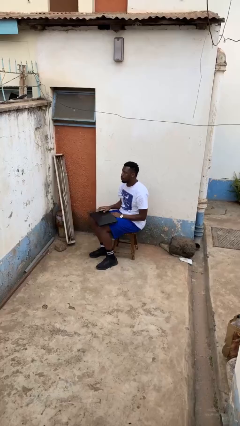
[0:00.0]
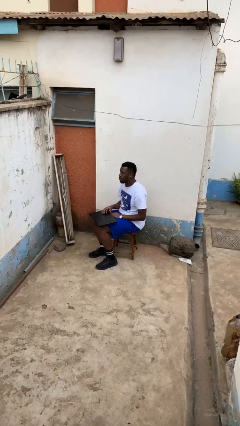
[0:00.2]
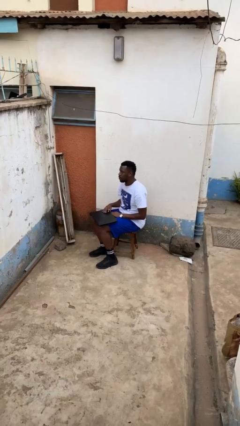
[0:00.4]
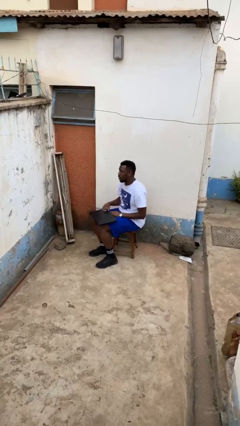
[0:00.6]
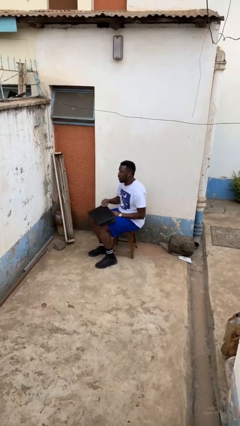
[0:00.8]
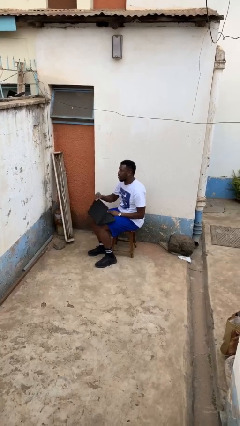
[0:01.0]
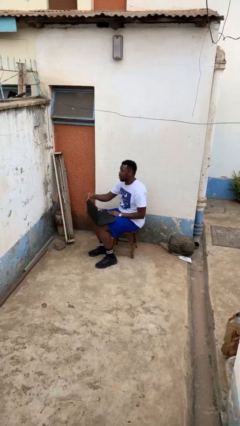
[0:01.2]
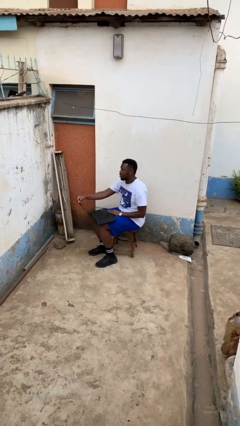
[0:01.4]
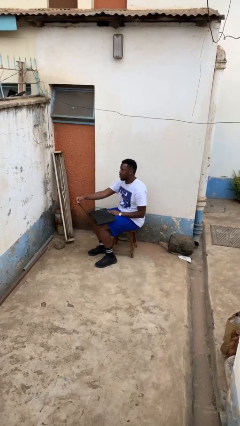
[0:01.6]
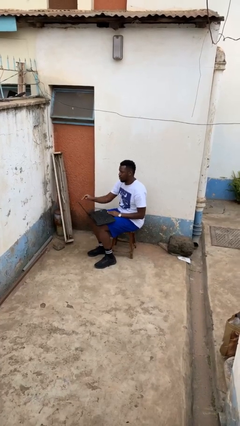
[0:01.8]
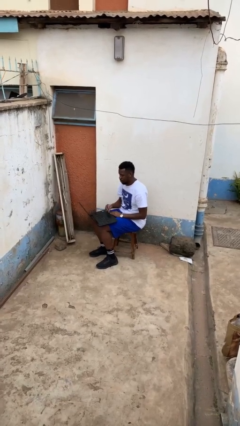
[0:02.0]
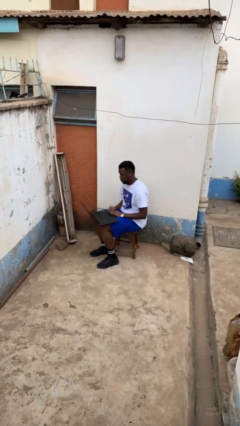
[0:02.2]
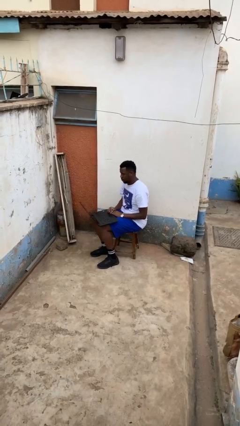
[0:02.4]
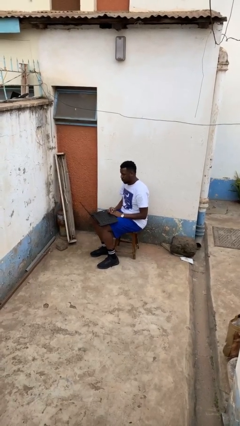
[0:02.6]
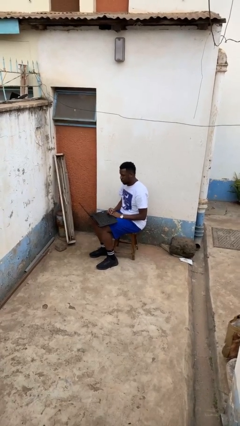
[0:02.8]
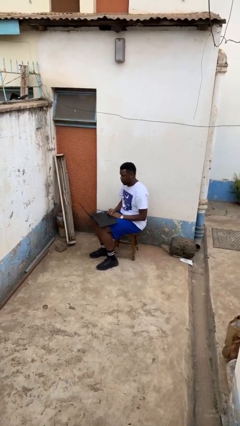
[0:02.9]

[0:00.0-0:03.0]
person opens laptop

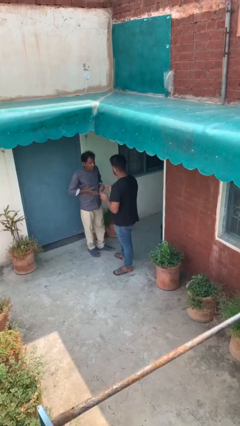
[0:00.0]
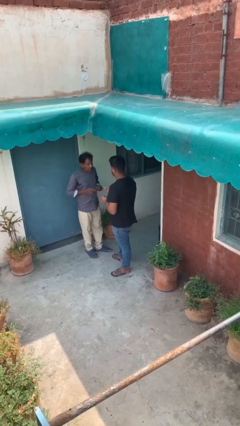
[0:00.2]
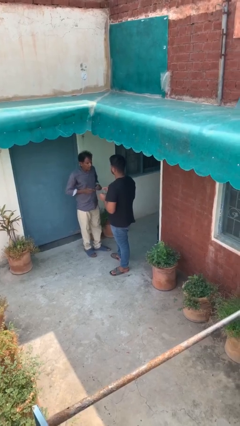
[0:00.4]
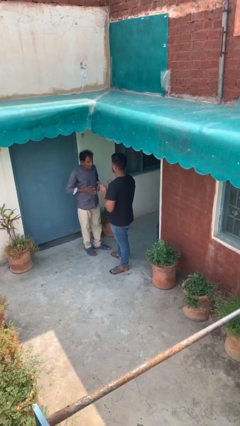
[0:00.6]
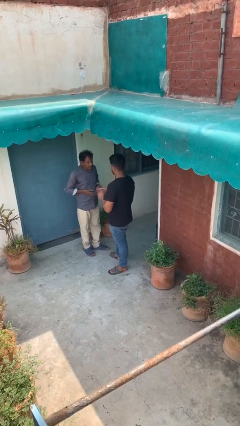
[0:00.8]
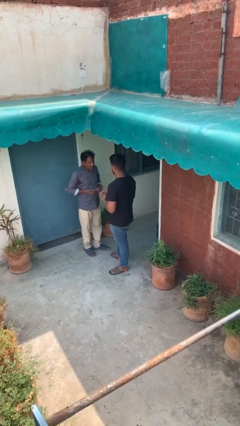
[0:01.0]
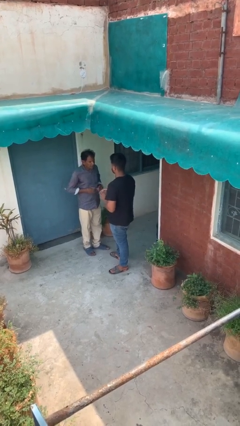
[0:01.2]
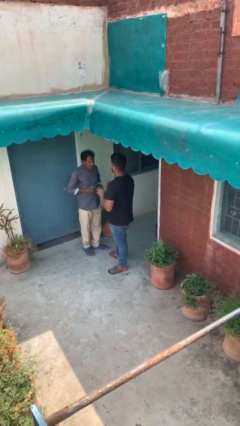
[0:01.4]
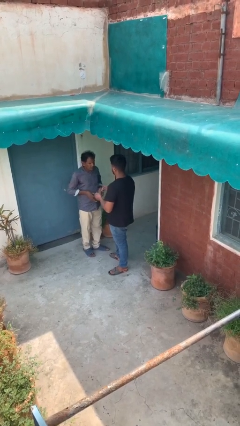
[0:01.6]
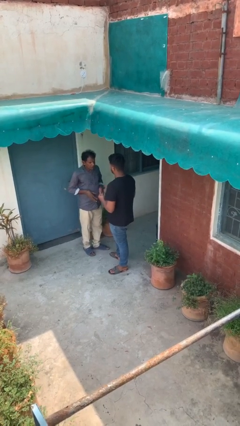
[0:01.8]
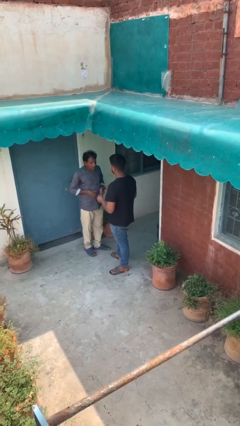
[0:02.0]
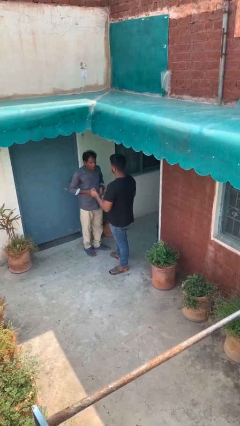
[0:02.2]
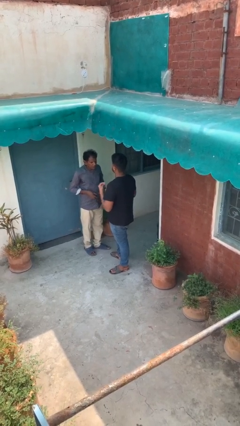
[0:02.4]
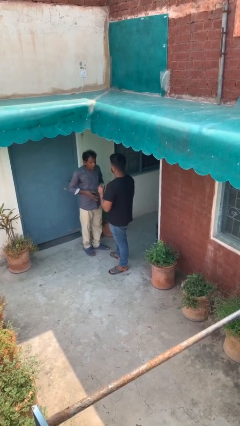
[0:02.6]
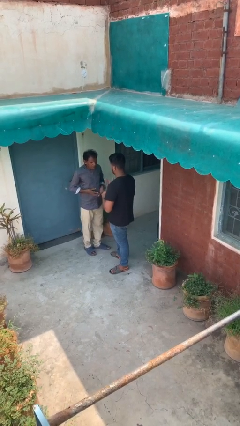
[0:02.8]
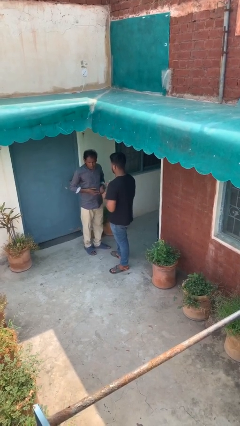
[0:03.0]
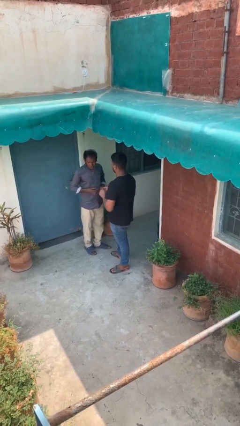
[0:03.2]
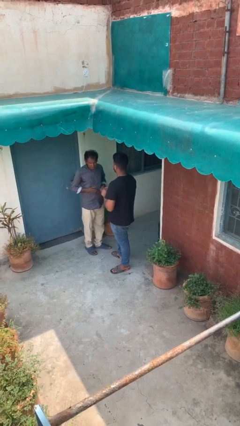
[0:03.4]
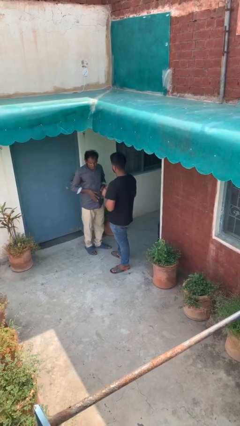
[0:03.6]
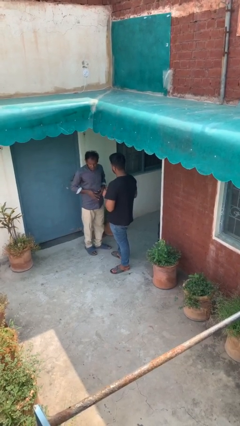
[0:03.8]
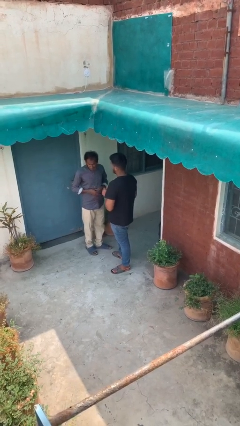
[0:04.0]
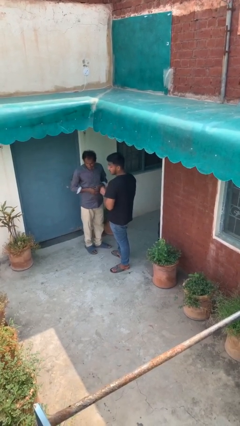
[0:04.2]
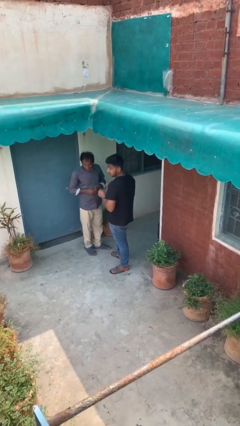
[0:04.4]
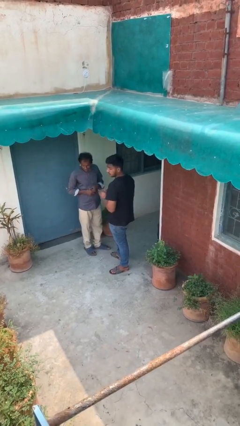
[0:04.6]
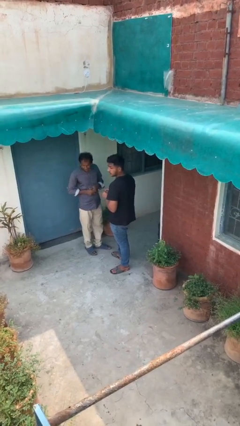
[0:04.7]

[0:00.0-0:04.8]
person talks to person

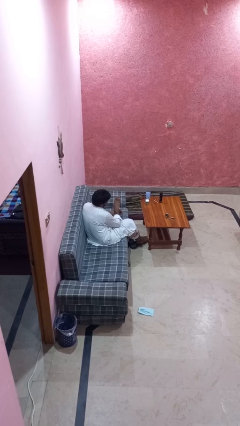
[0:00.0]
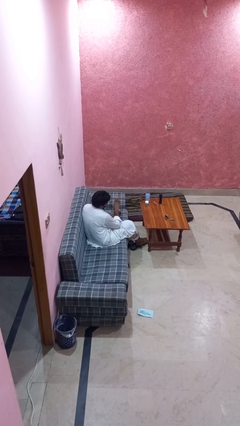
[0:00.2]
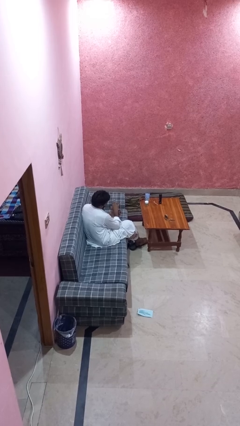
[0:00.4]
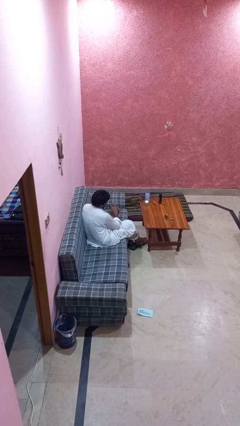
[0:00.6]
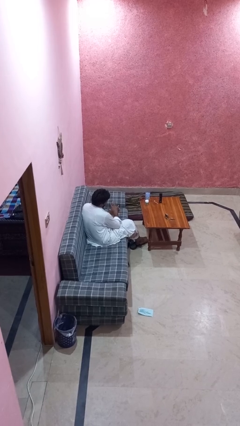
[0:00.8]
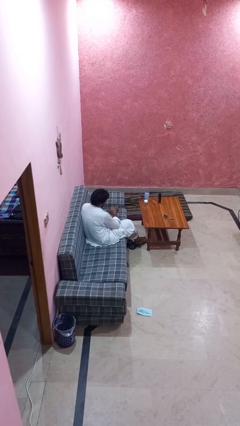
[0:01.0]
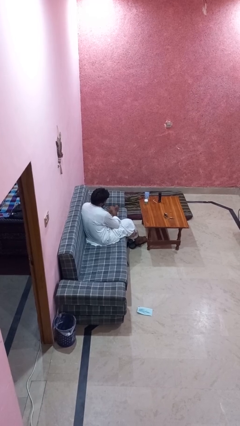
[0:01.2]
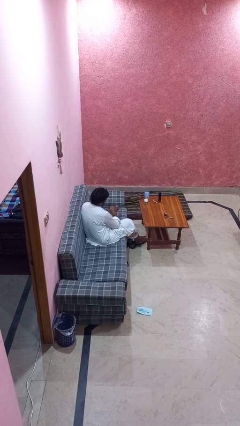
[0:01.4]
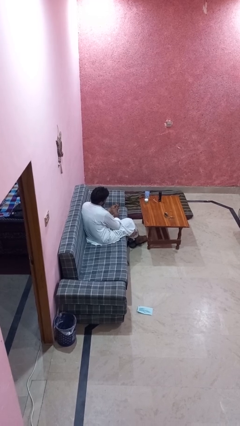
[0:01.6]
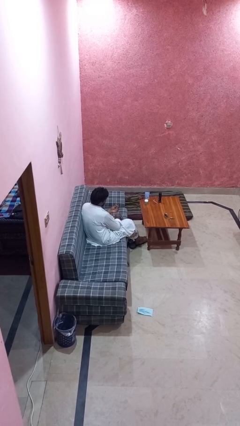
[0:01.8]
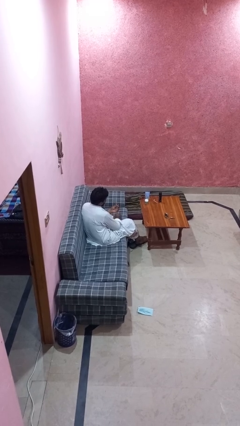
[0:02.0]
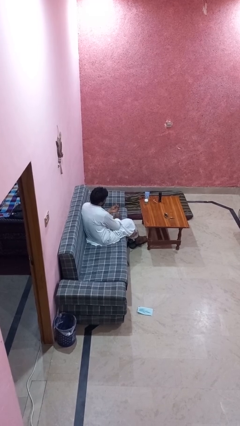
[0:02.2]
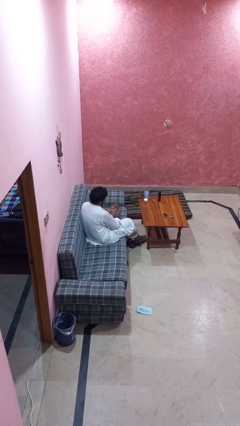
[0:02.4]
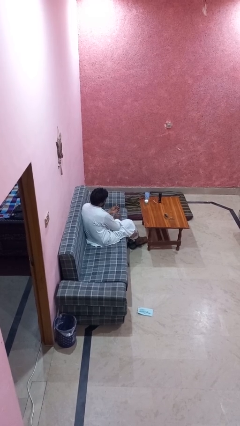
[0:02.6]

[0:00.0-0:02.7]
person takes off ring

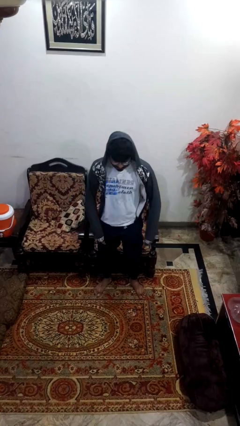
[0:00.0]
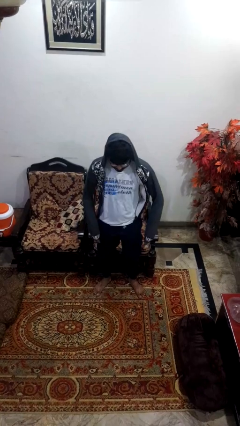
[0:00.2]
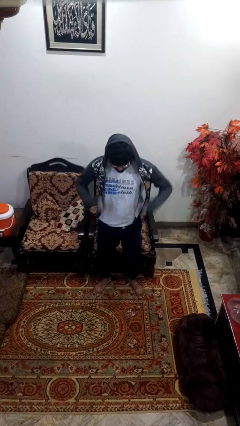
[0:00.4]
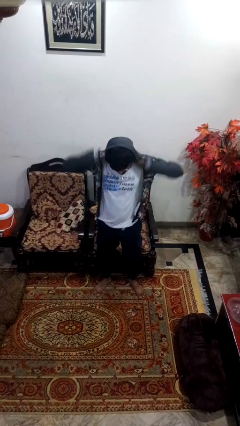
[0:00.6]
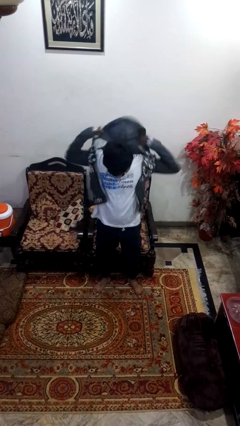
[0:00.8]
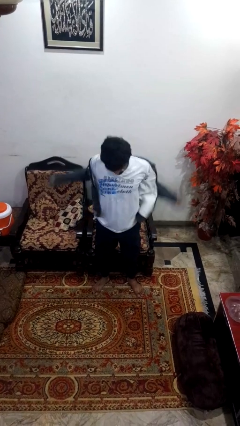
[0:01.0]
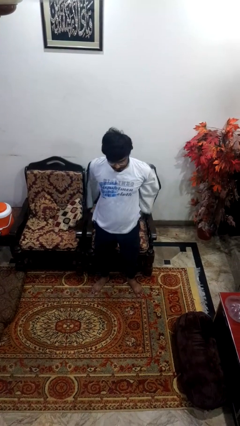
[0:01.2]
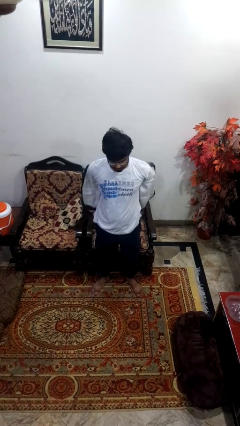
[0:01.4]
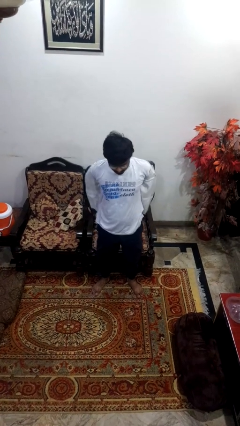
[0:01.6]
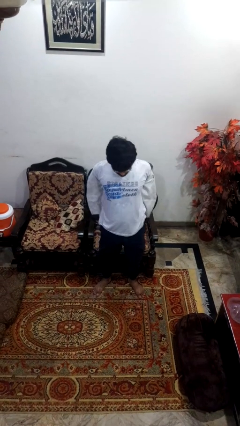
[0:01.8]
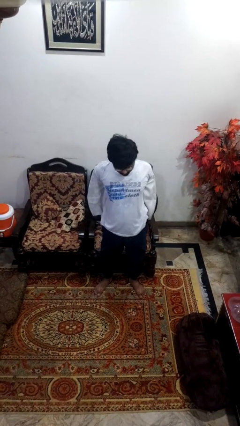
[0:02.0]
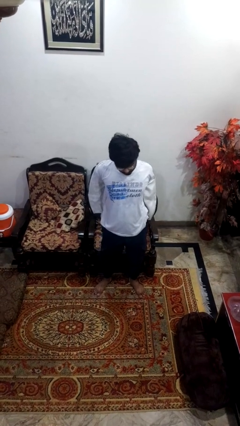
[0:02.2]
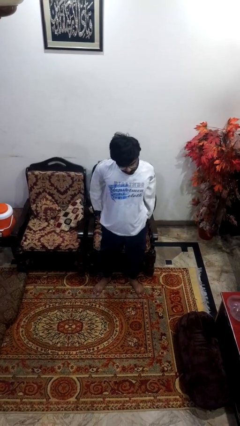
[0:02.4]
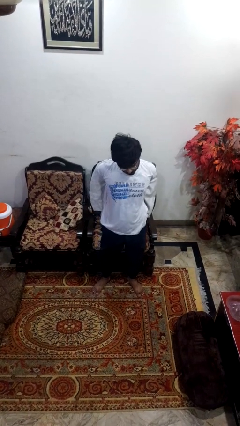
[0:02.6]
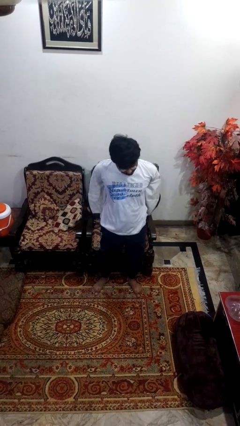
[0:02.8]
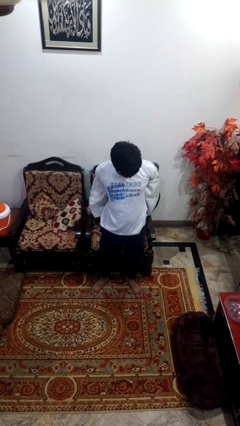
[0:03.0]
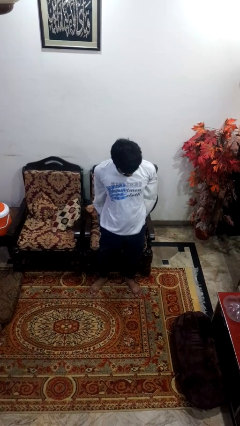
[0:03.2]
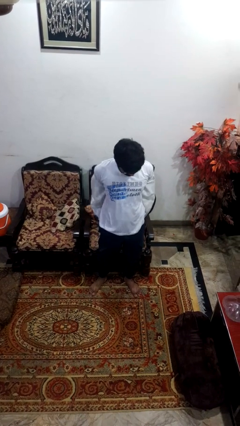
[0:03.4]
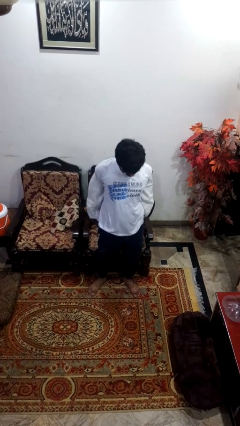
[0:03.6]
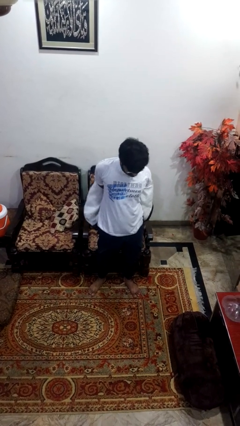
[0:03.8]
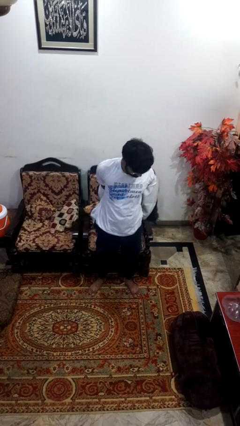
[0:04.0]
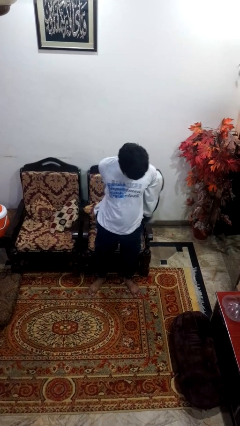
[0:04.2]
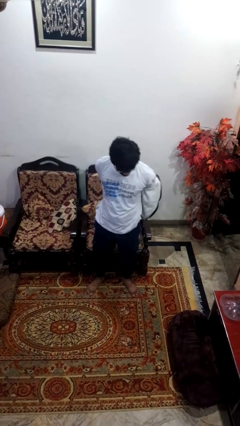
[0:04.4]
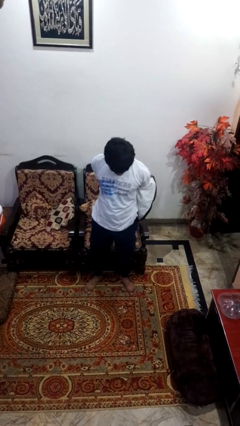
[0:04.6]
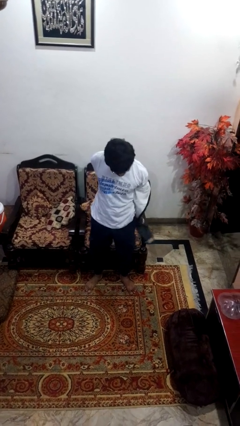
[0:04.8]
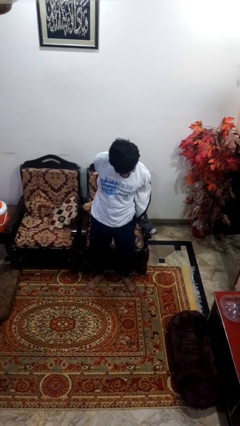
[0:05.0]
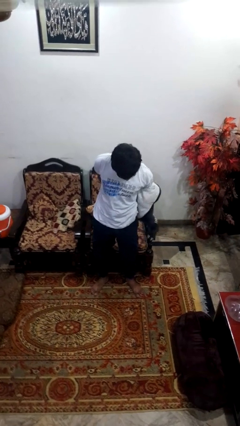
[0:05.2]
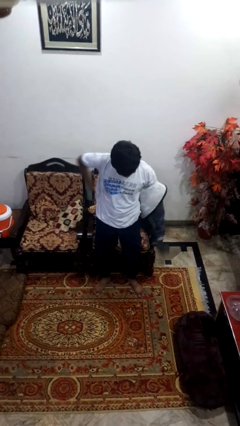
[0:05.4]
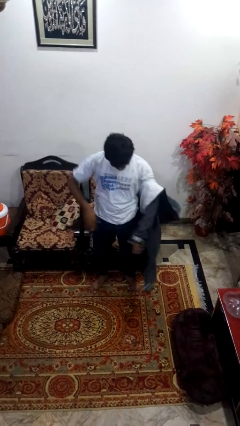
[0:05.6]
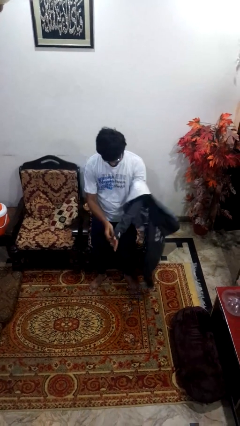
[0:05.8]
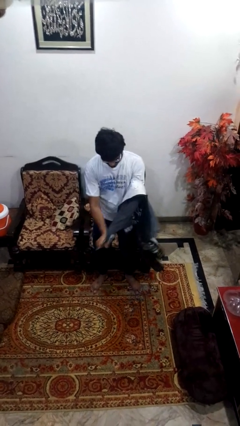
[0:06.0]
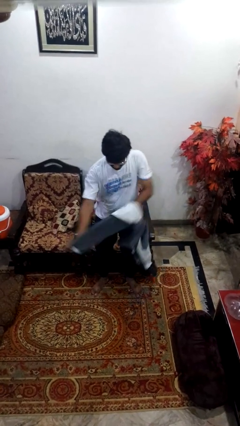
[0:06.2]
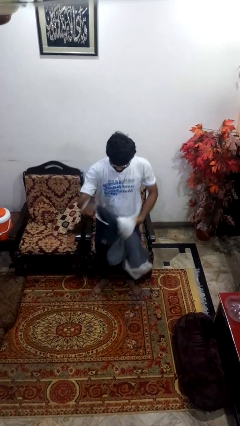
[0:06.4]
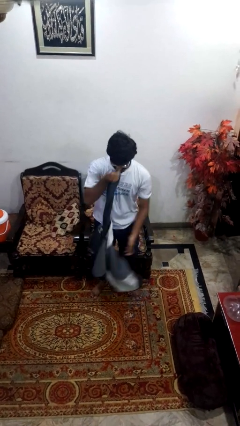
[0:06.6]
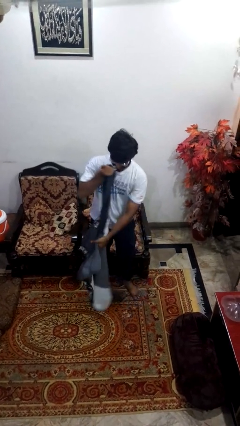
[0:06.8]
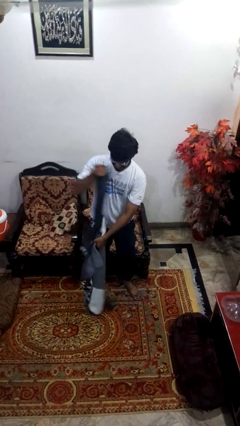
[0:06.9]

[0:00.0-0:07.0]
person takes off hoodie

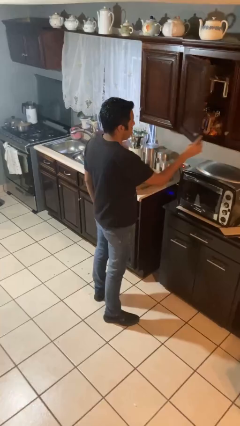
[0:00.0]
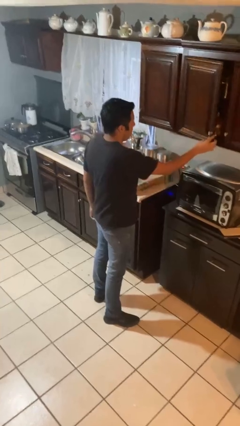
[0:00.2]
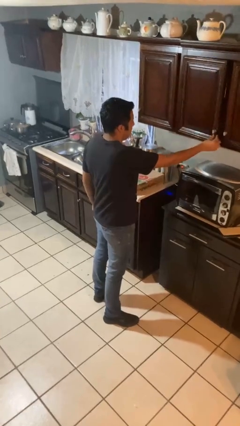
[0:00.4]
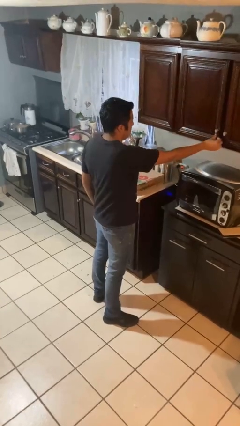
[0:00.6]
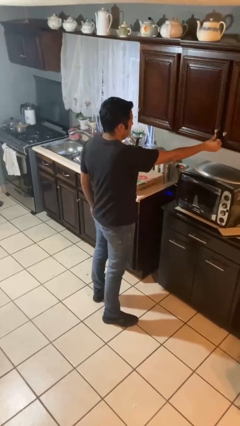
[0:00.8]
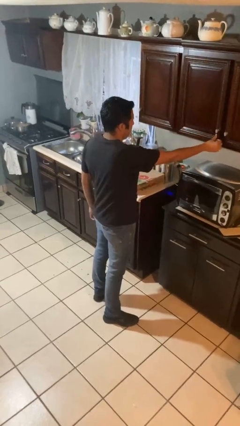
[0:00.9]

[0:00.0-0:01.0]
person closes cabinet
